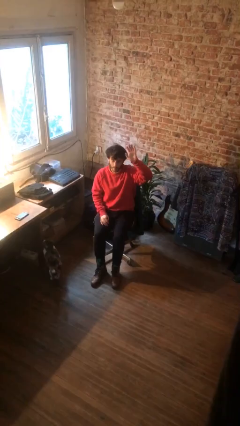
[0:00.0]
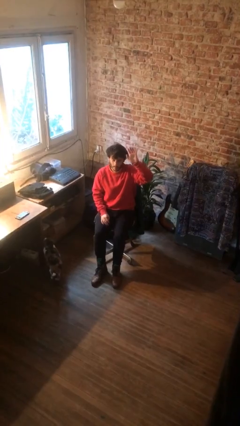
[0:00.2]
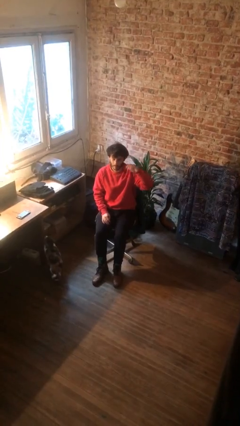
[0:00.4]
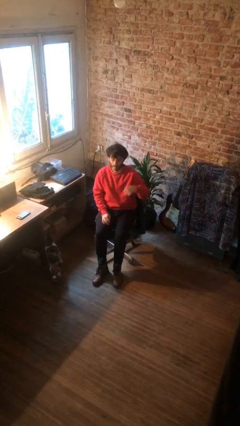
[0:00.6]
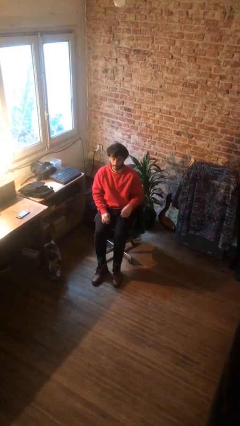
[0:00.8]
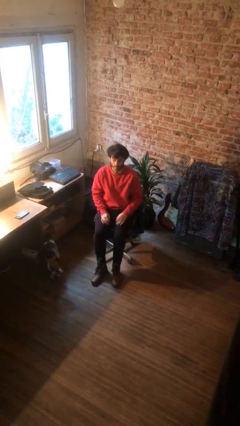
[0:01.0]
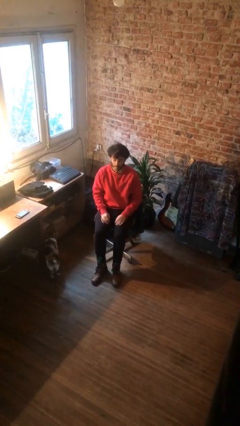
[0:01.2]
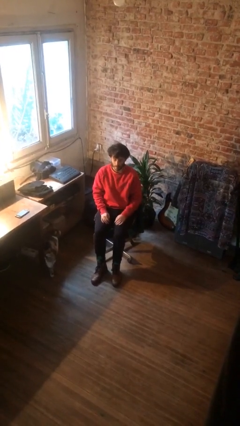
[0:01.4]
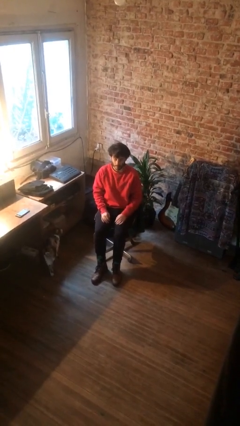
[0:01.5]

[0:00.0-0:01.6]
person gestures lower hand

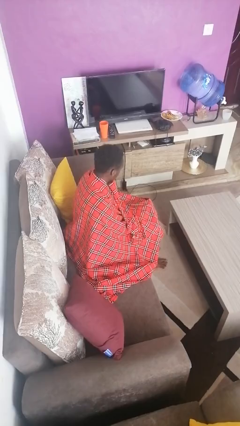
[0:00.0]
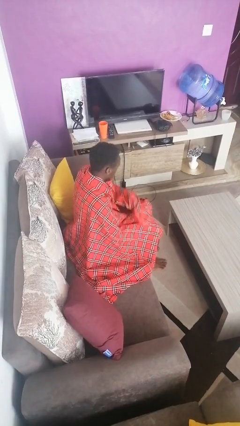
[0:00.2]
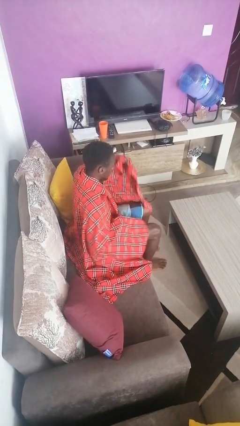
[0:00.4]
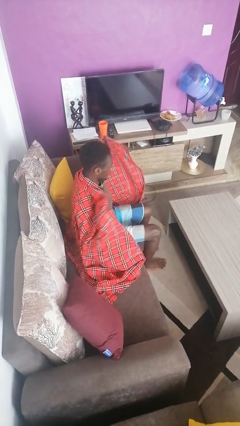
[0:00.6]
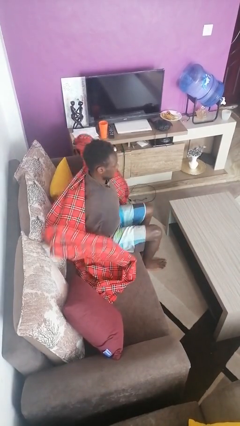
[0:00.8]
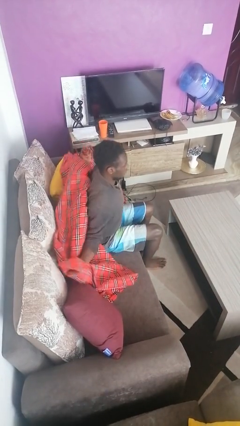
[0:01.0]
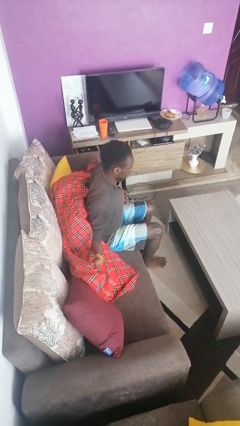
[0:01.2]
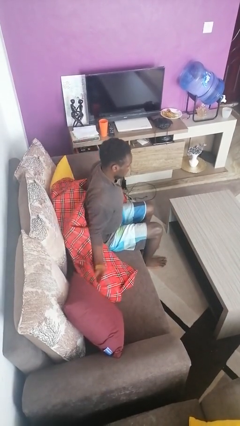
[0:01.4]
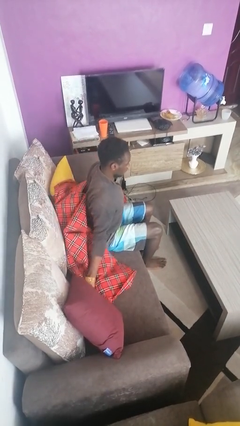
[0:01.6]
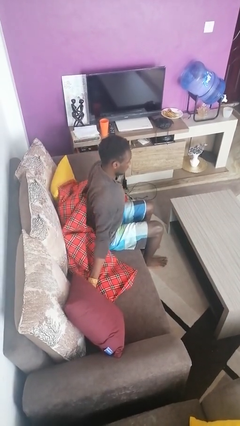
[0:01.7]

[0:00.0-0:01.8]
person uncovers with blanket

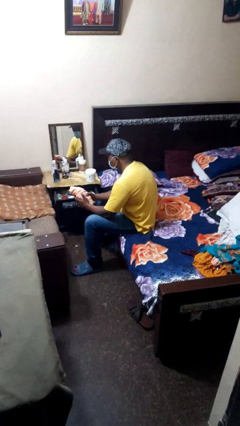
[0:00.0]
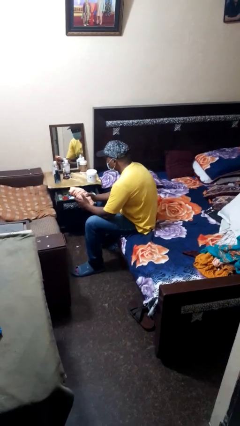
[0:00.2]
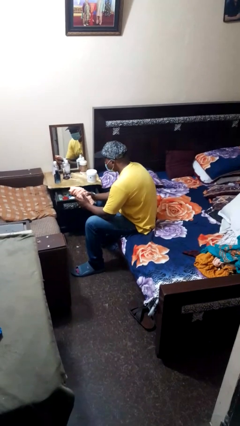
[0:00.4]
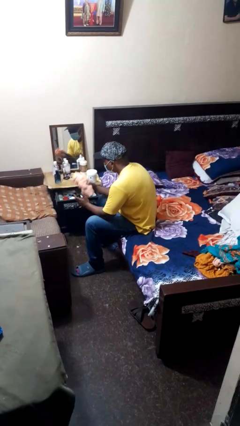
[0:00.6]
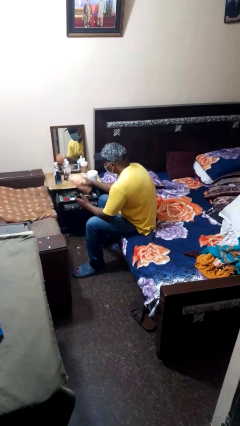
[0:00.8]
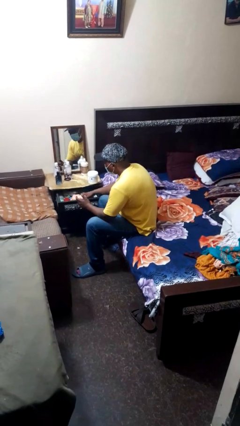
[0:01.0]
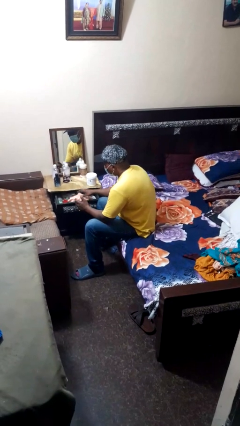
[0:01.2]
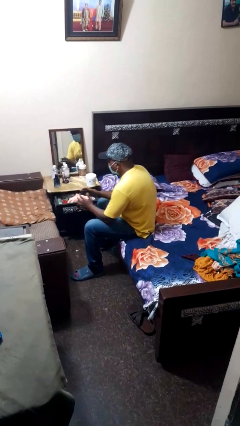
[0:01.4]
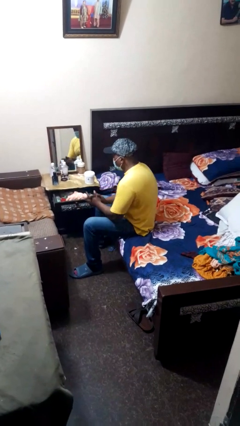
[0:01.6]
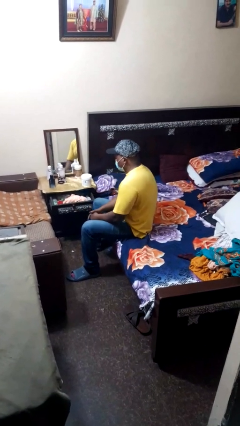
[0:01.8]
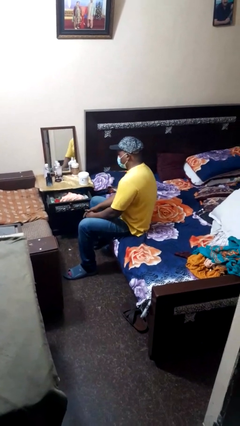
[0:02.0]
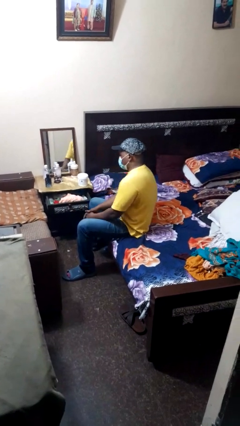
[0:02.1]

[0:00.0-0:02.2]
person puts clothes into dresser

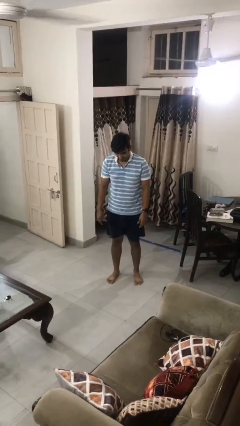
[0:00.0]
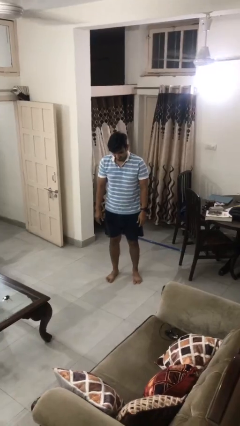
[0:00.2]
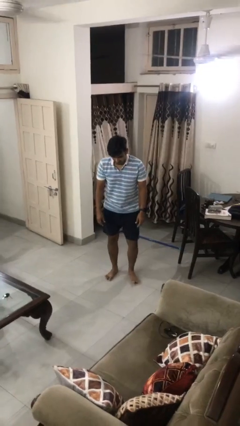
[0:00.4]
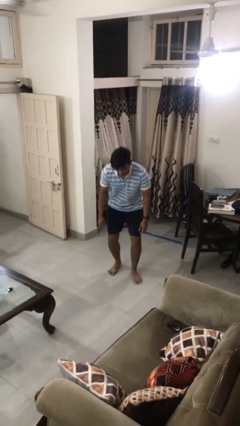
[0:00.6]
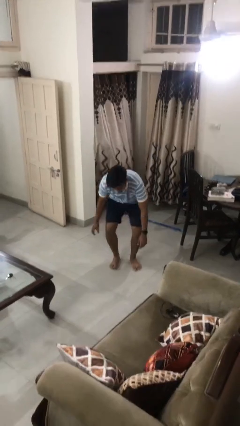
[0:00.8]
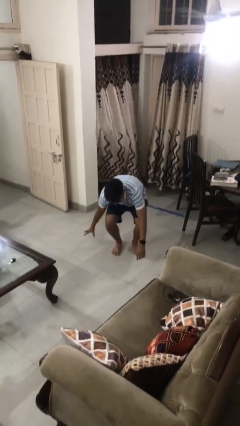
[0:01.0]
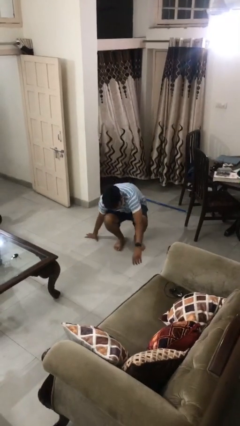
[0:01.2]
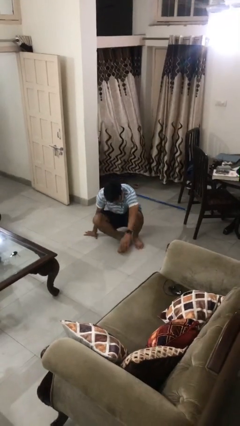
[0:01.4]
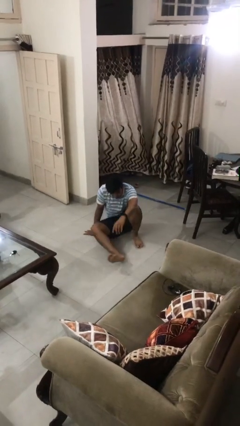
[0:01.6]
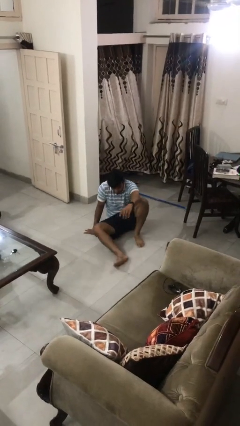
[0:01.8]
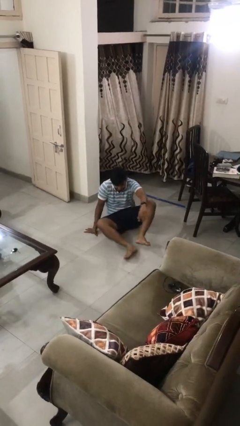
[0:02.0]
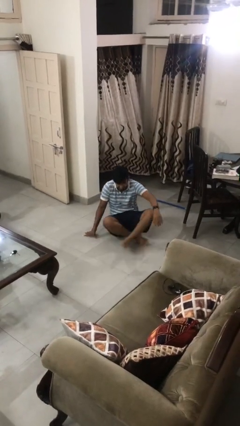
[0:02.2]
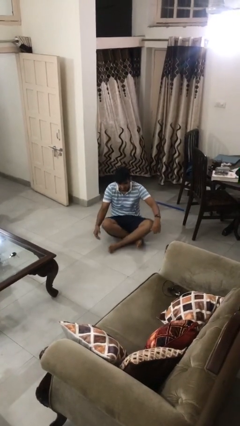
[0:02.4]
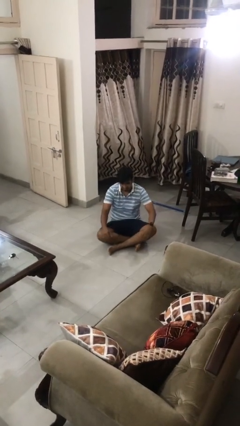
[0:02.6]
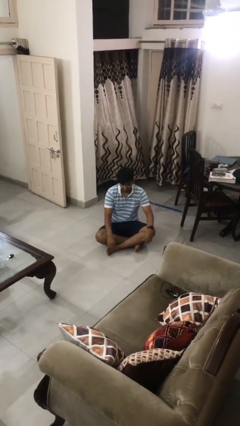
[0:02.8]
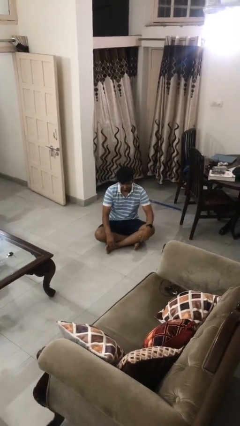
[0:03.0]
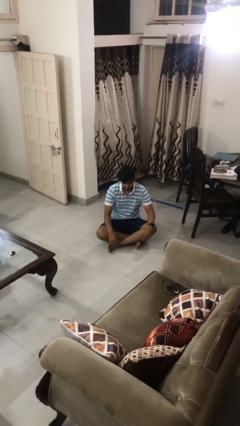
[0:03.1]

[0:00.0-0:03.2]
person sits crisscross

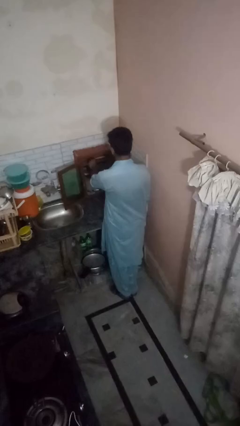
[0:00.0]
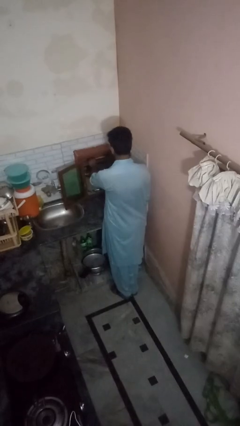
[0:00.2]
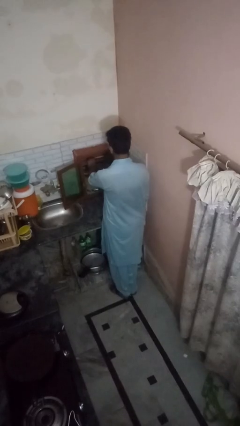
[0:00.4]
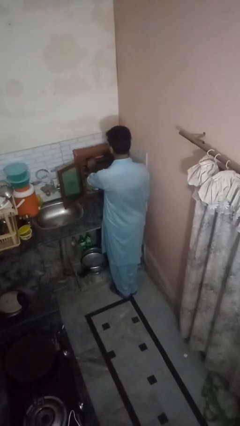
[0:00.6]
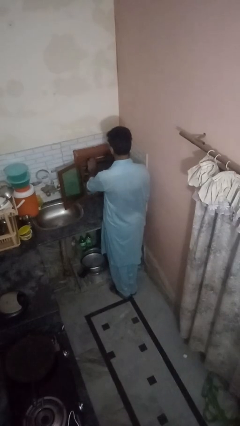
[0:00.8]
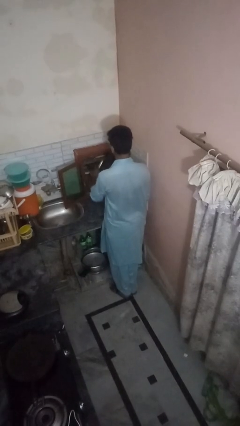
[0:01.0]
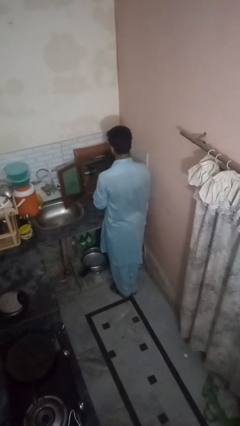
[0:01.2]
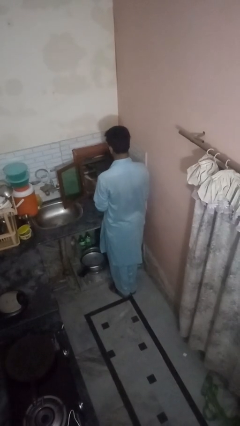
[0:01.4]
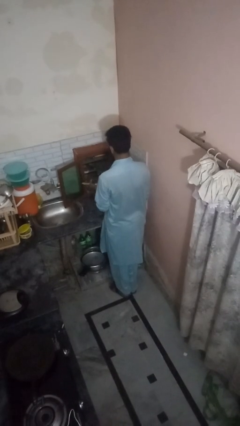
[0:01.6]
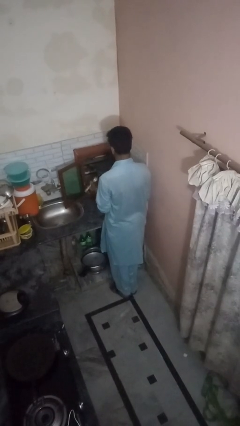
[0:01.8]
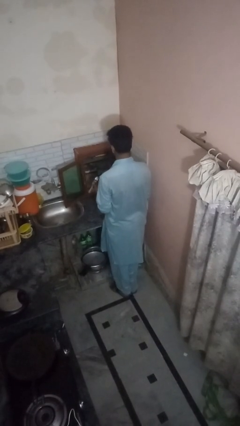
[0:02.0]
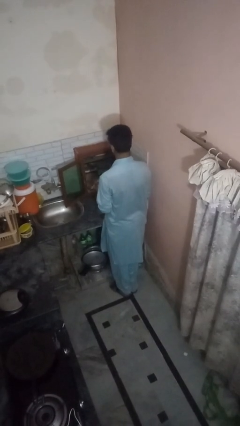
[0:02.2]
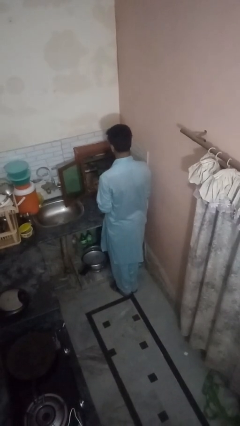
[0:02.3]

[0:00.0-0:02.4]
person takes object from kitchen drawer

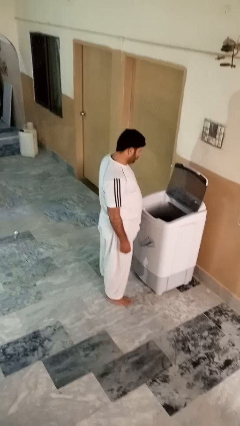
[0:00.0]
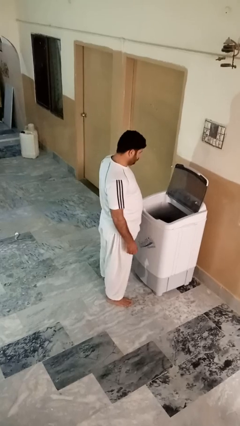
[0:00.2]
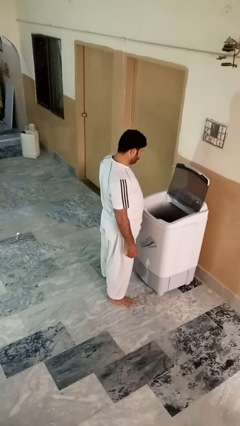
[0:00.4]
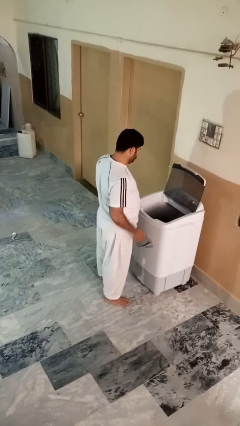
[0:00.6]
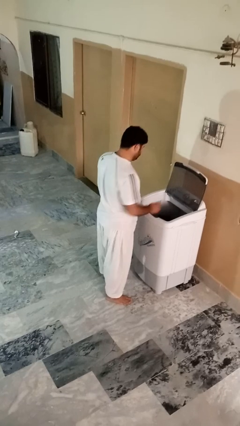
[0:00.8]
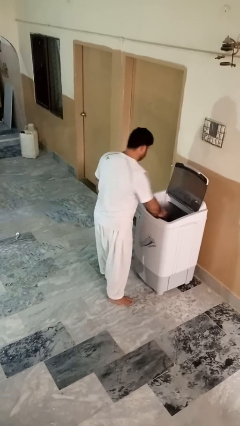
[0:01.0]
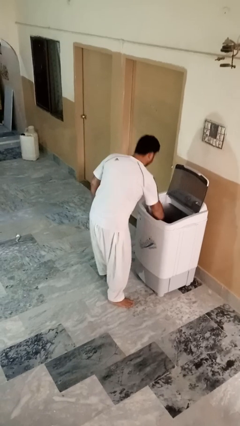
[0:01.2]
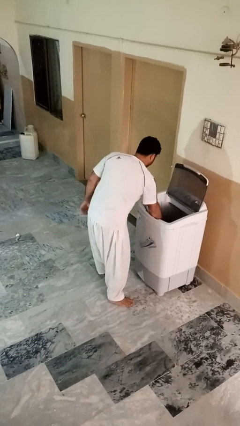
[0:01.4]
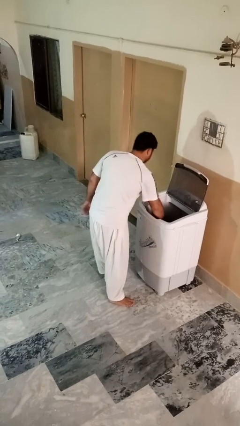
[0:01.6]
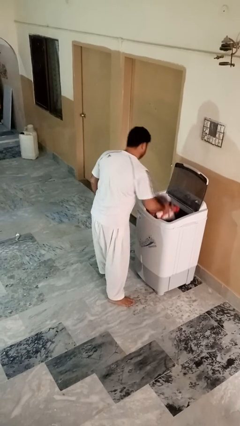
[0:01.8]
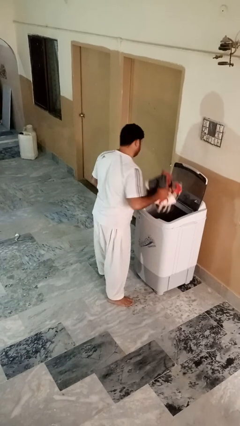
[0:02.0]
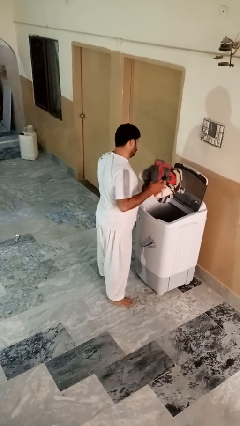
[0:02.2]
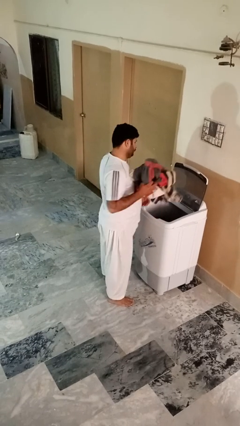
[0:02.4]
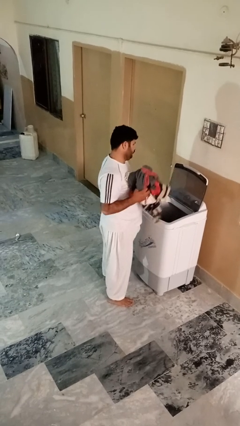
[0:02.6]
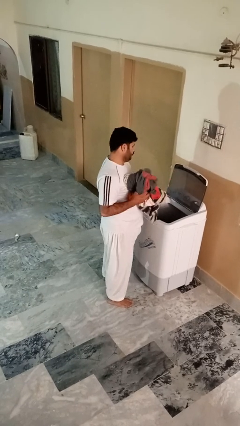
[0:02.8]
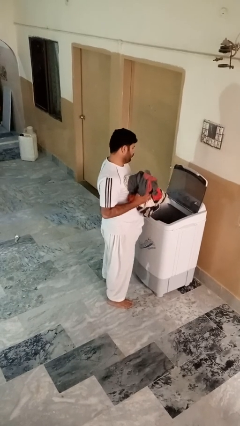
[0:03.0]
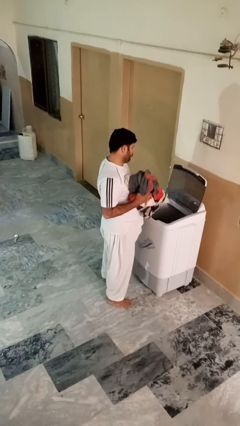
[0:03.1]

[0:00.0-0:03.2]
person unloads clotheswasher

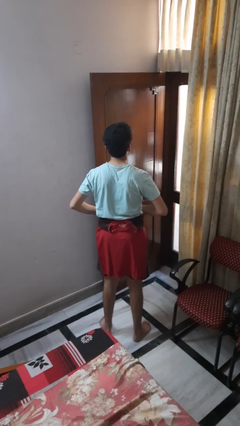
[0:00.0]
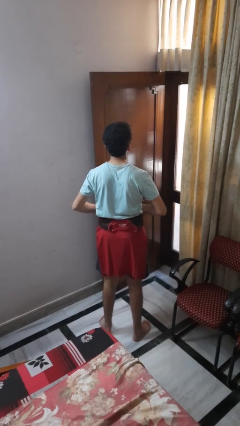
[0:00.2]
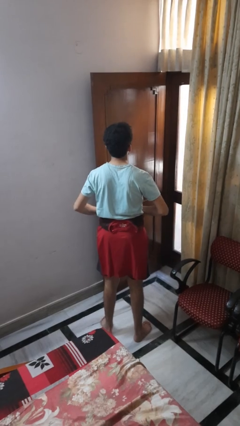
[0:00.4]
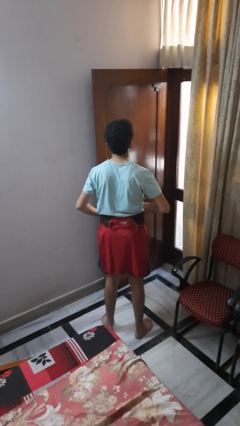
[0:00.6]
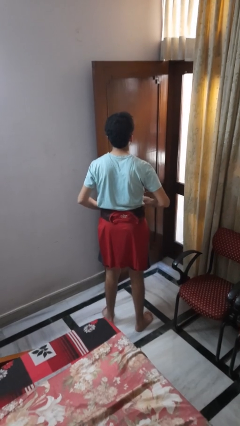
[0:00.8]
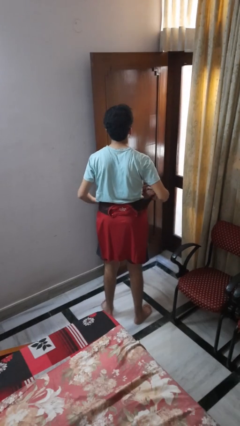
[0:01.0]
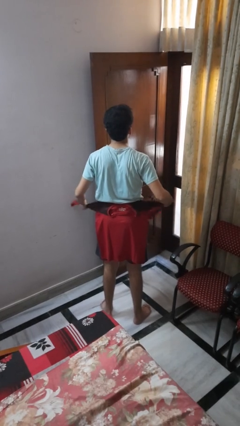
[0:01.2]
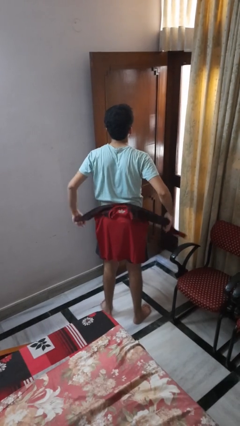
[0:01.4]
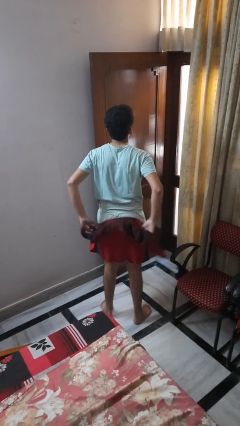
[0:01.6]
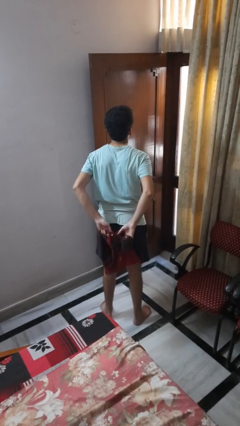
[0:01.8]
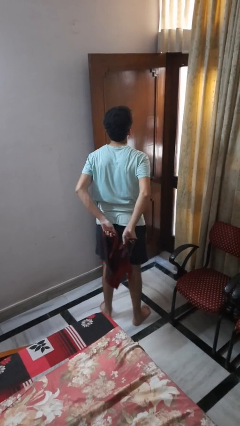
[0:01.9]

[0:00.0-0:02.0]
person unties jacket around waist

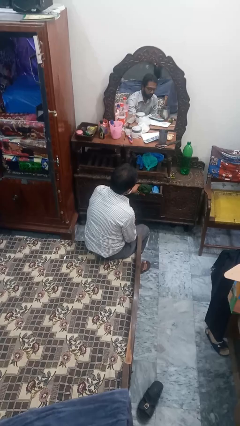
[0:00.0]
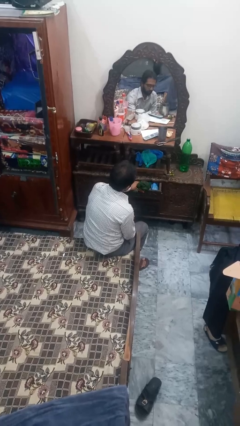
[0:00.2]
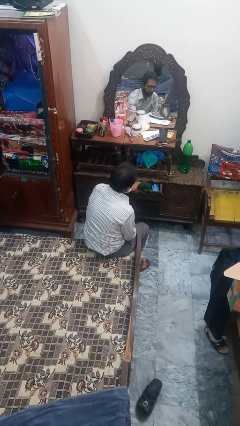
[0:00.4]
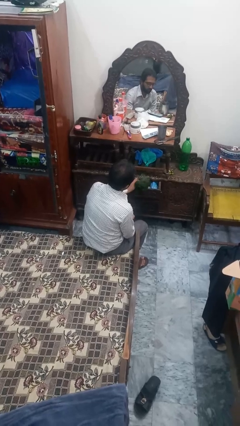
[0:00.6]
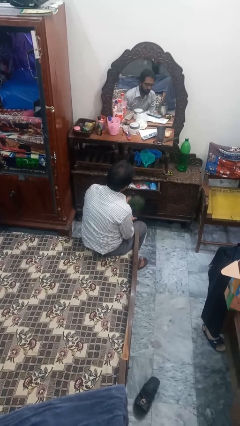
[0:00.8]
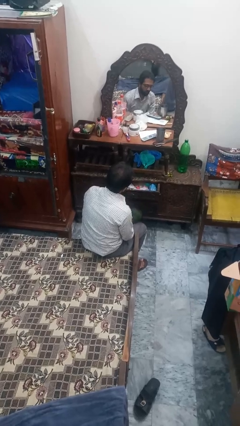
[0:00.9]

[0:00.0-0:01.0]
person takes clothes from dresser
